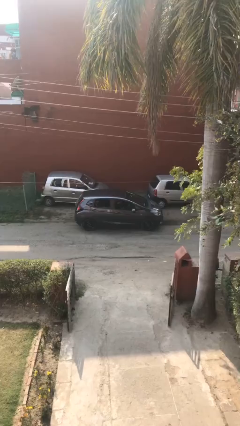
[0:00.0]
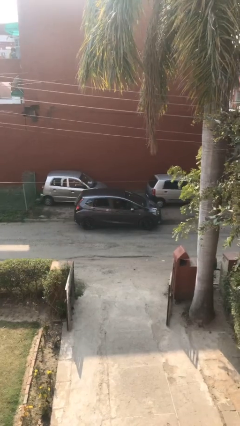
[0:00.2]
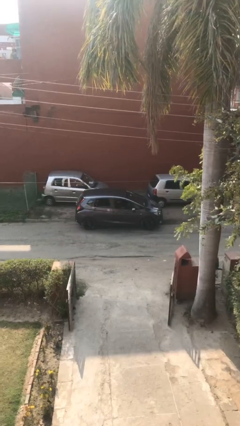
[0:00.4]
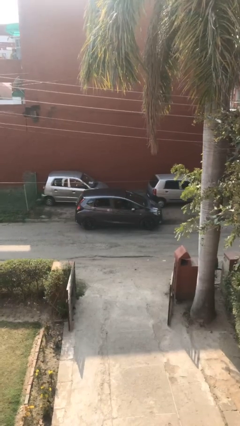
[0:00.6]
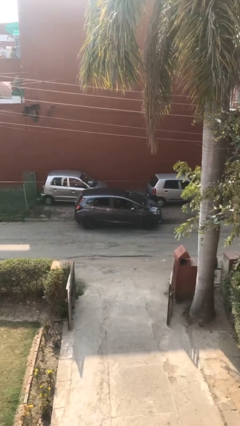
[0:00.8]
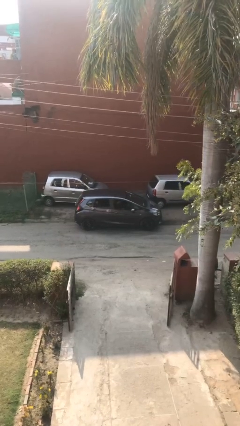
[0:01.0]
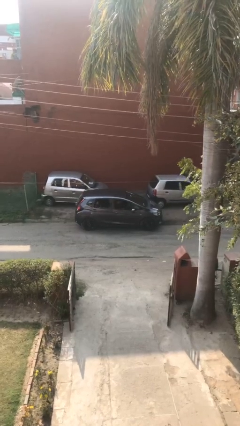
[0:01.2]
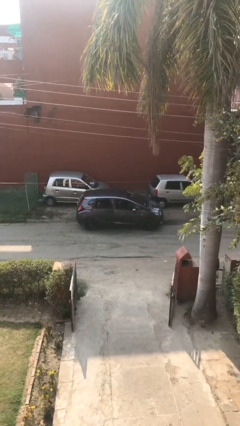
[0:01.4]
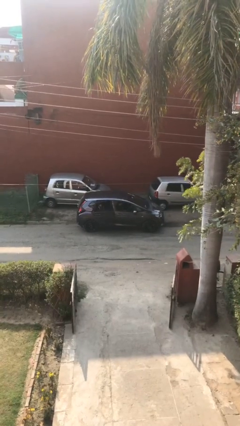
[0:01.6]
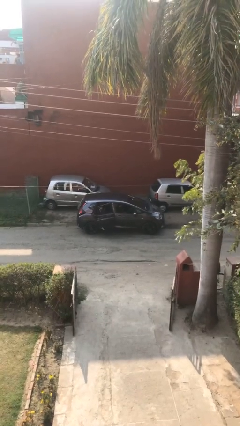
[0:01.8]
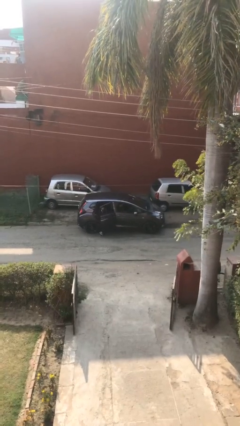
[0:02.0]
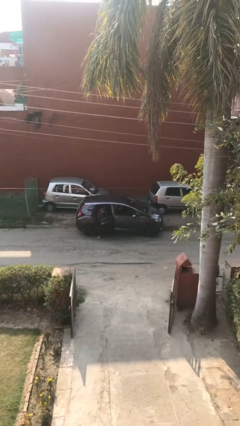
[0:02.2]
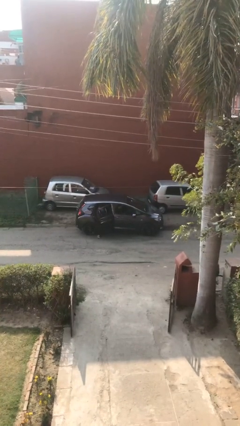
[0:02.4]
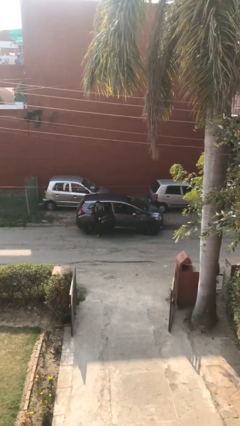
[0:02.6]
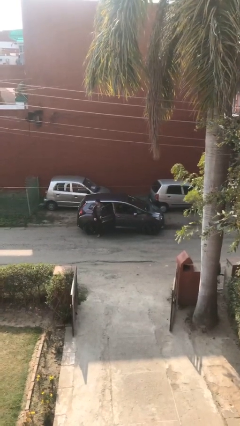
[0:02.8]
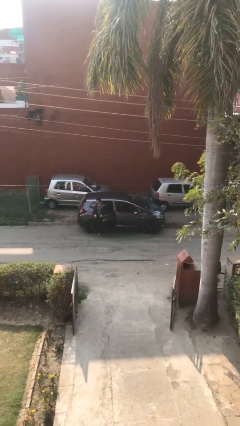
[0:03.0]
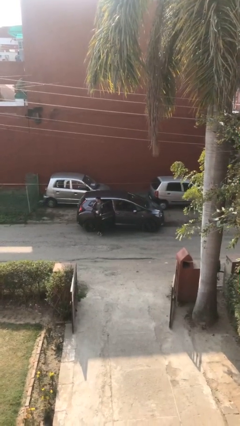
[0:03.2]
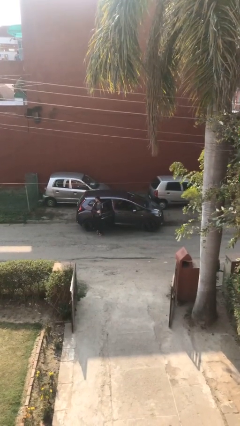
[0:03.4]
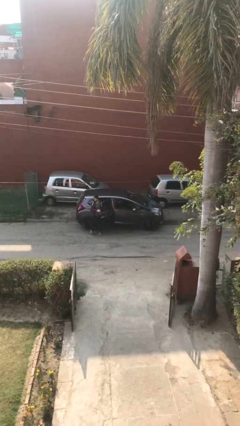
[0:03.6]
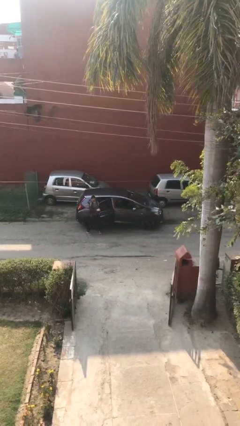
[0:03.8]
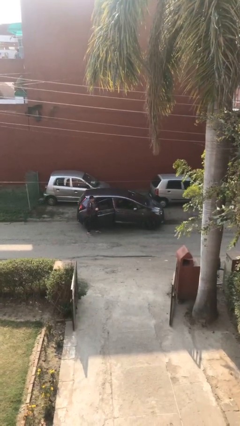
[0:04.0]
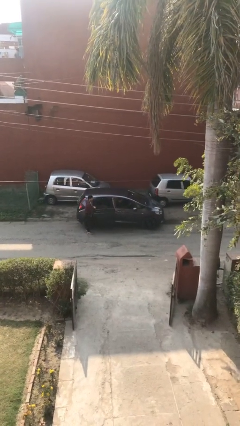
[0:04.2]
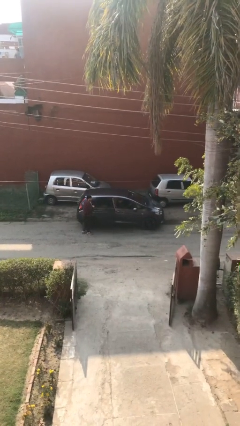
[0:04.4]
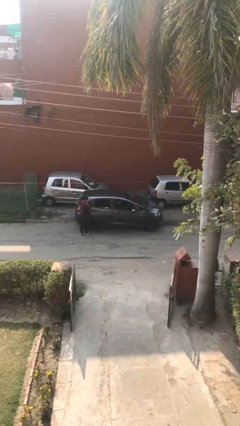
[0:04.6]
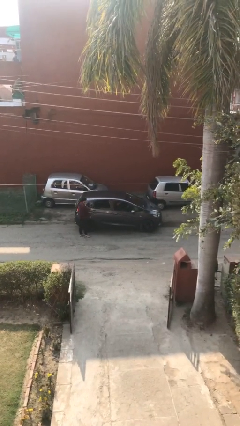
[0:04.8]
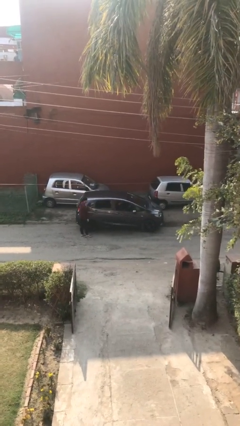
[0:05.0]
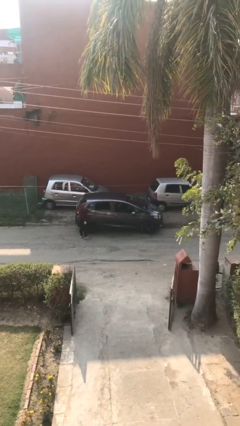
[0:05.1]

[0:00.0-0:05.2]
car drops off person

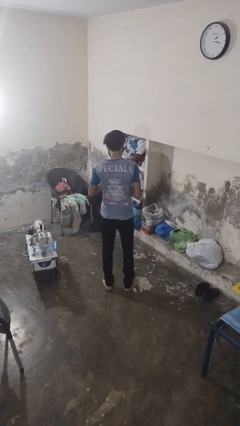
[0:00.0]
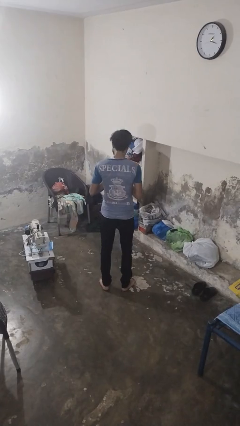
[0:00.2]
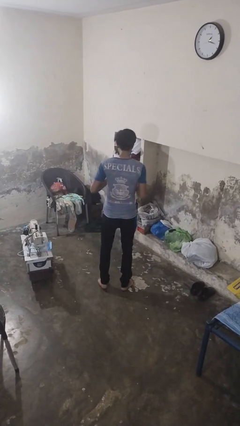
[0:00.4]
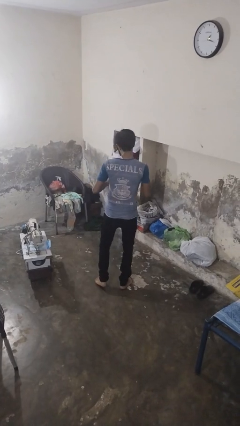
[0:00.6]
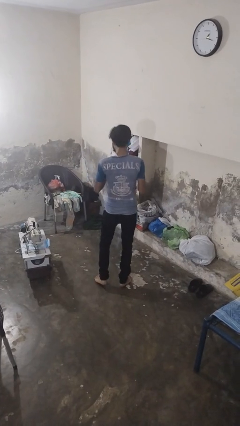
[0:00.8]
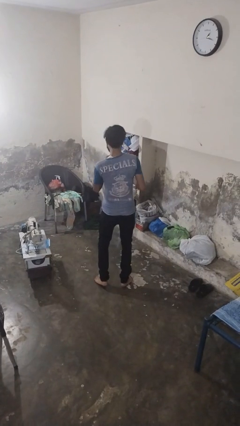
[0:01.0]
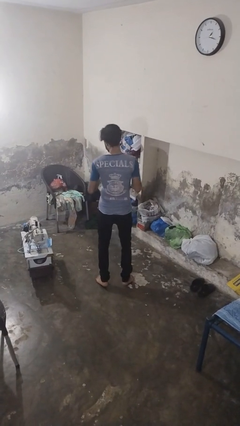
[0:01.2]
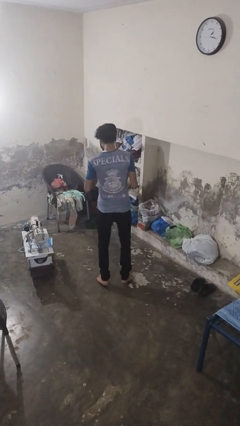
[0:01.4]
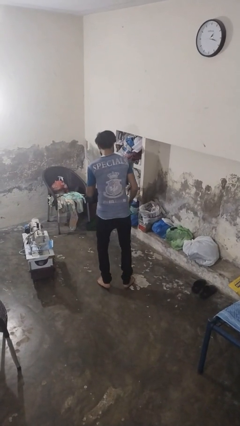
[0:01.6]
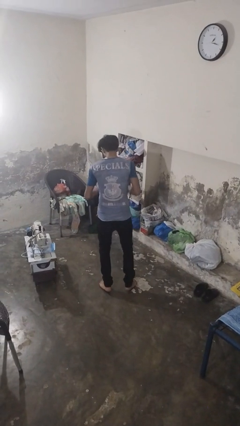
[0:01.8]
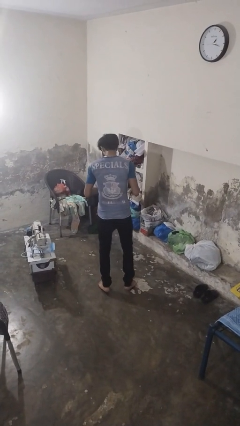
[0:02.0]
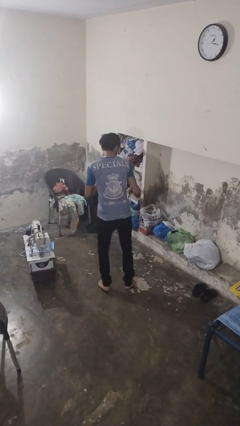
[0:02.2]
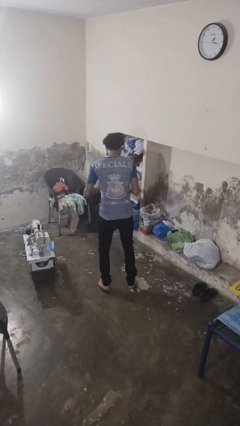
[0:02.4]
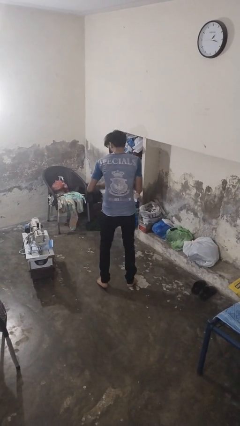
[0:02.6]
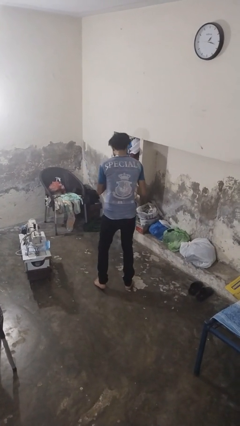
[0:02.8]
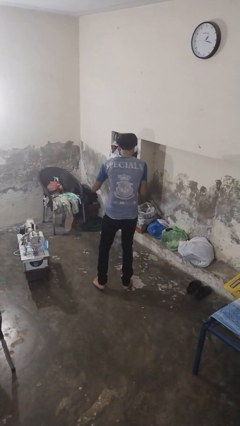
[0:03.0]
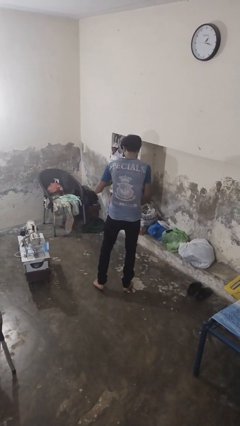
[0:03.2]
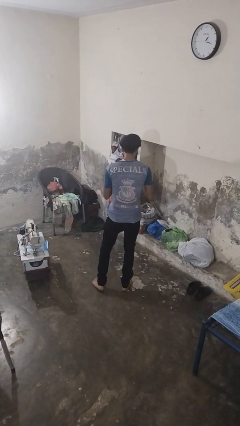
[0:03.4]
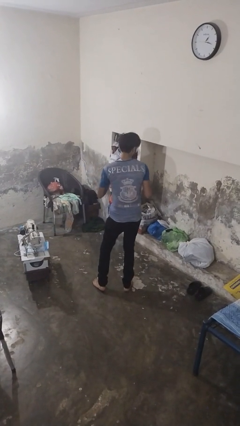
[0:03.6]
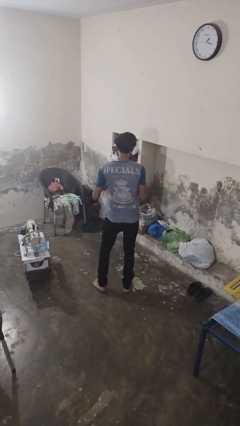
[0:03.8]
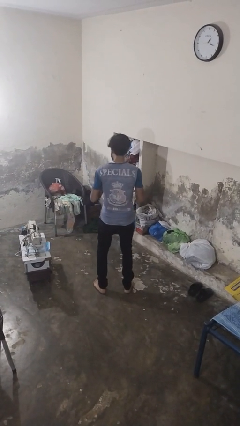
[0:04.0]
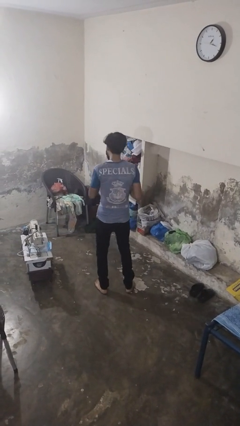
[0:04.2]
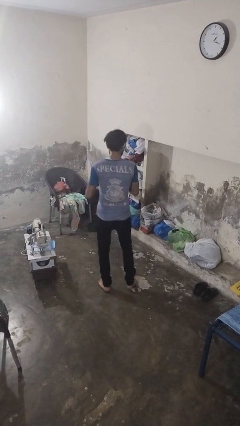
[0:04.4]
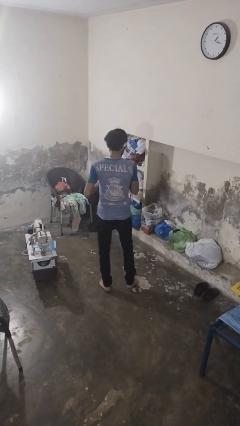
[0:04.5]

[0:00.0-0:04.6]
person dances in place

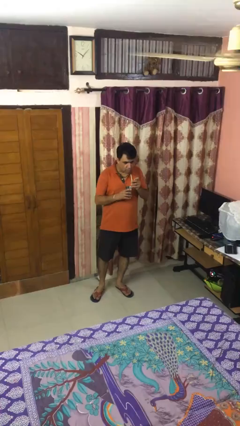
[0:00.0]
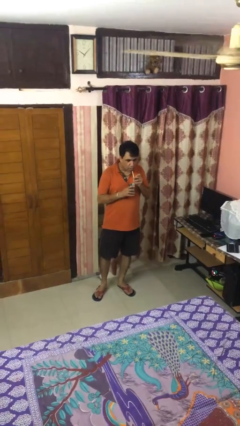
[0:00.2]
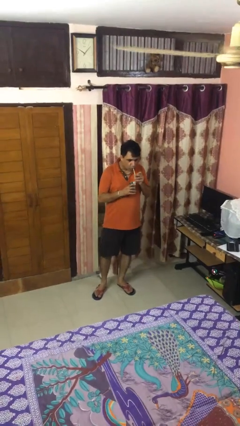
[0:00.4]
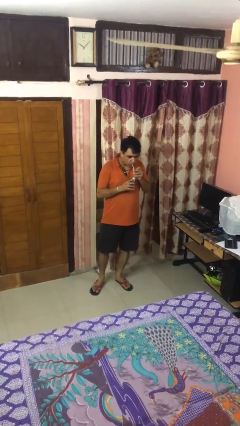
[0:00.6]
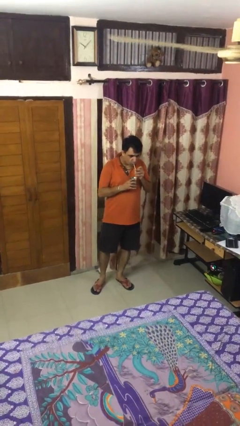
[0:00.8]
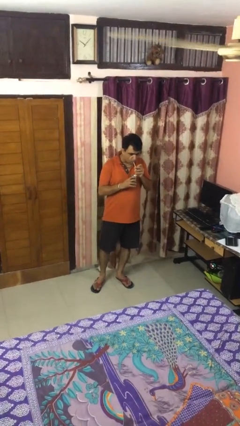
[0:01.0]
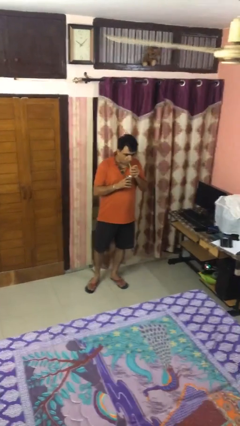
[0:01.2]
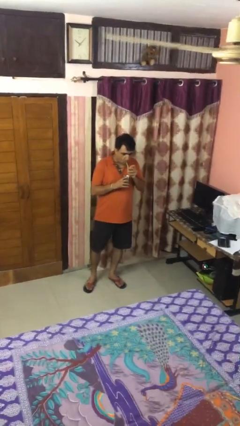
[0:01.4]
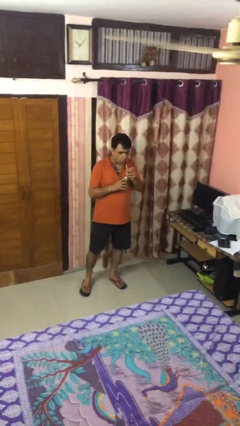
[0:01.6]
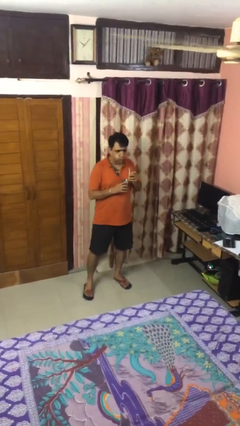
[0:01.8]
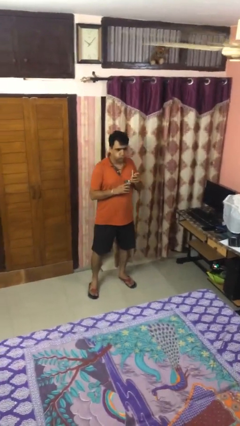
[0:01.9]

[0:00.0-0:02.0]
person drinks from straw

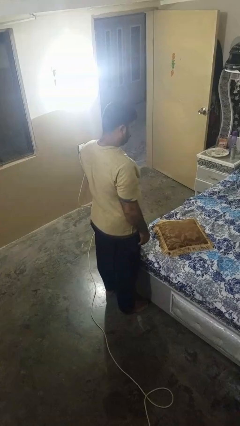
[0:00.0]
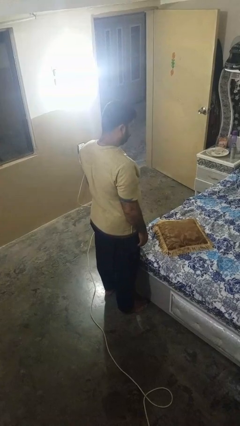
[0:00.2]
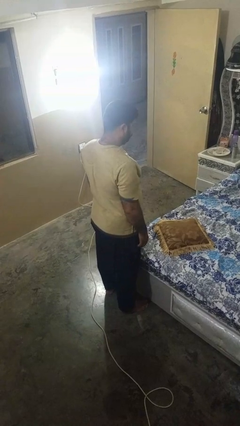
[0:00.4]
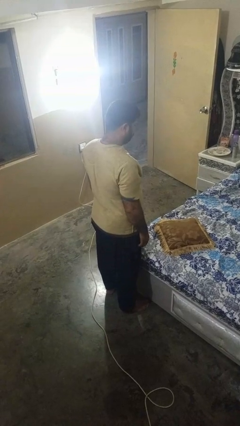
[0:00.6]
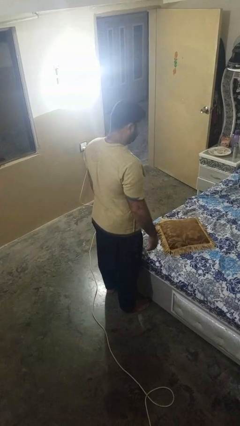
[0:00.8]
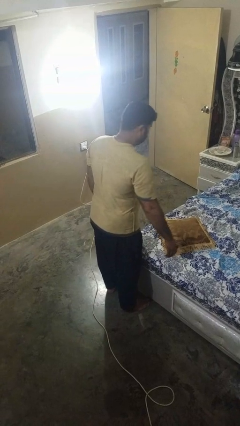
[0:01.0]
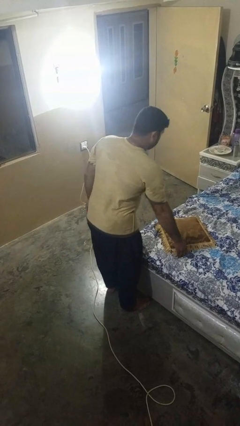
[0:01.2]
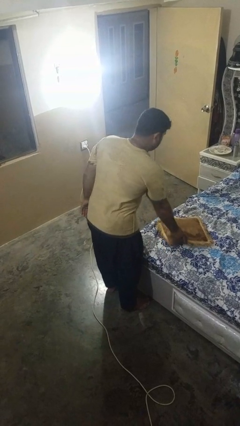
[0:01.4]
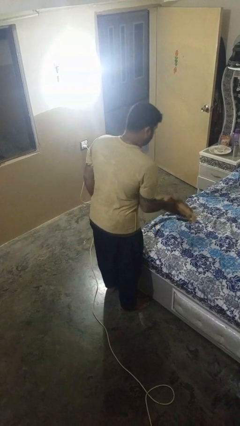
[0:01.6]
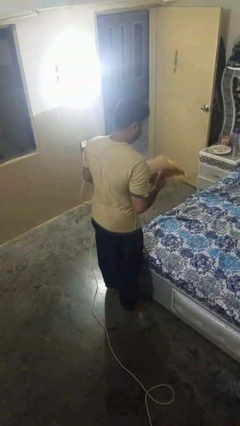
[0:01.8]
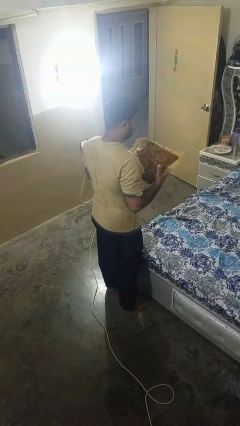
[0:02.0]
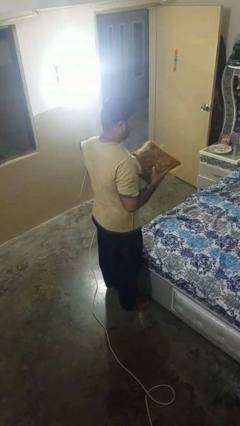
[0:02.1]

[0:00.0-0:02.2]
person picks up object from bed

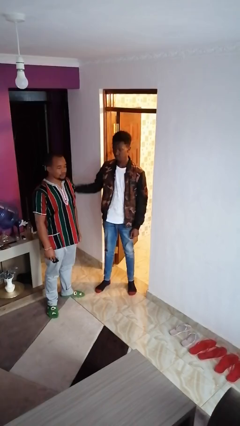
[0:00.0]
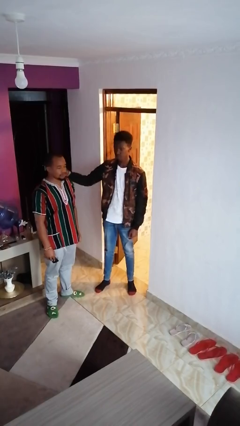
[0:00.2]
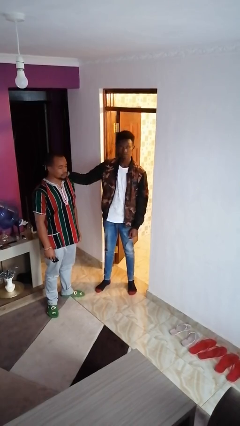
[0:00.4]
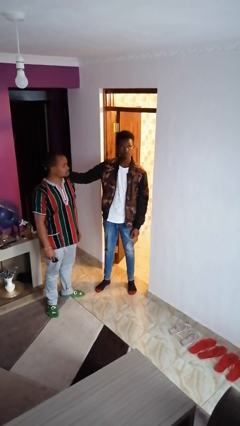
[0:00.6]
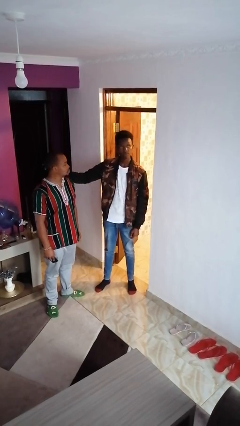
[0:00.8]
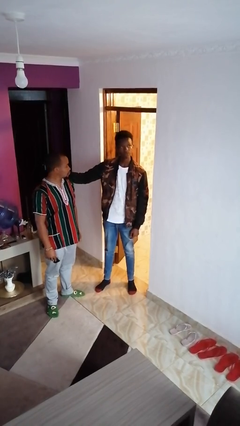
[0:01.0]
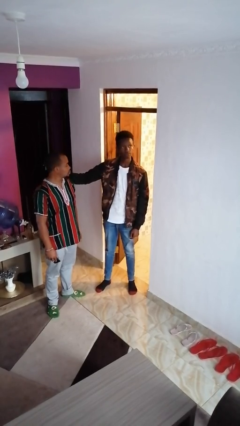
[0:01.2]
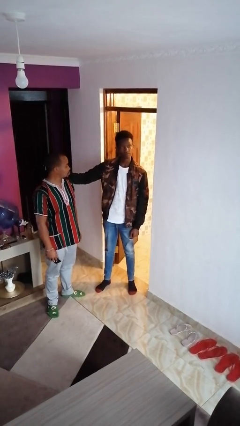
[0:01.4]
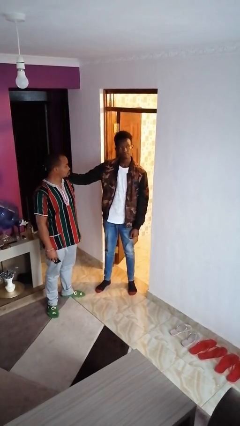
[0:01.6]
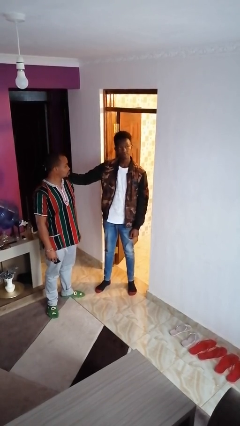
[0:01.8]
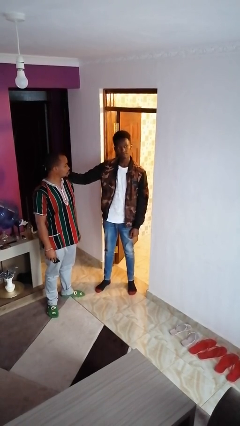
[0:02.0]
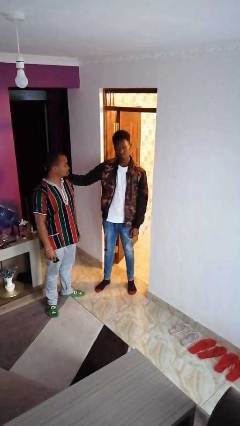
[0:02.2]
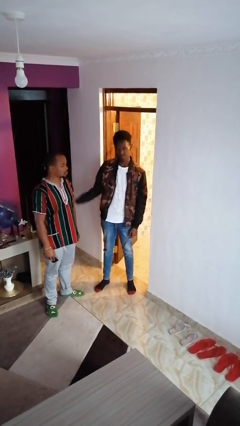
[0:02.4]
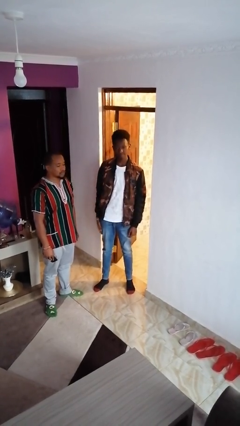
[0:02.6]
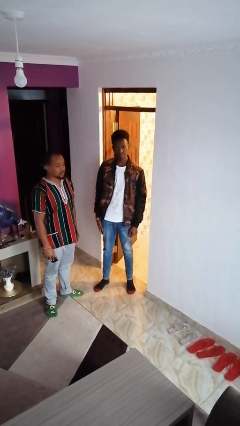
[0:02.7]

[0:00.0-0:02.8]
person pounds shoulders of person

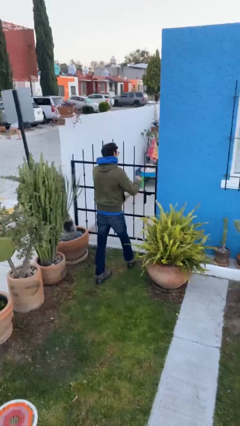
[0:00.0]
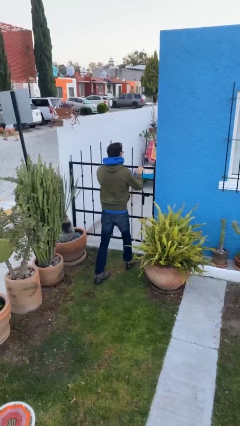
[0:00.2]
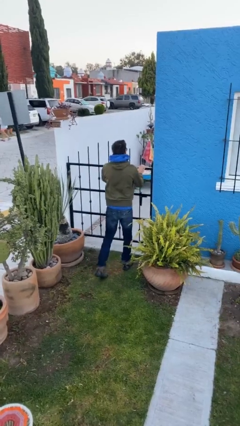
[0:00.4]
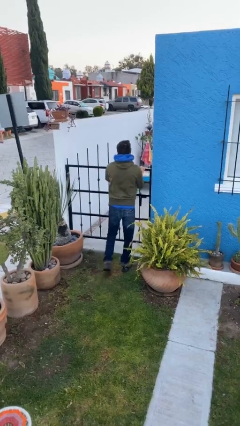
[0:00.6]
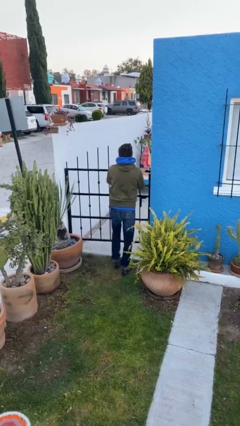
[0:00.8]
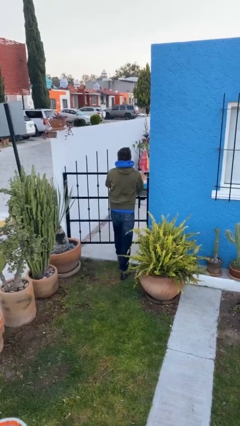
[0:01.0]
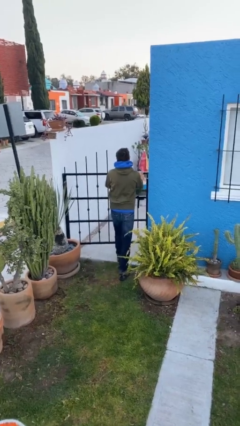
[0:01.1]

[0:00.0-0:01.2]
person opens facility door
